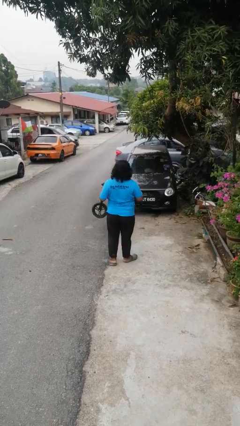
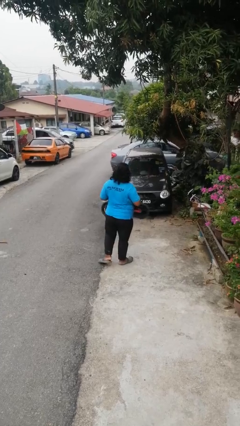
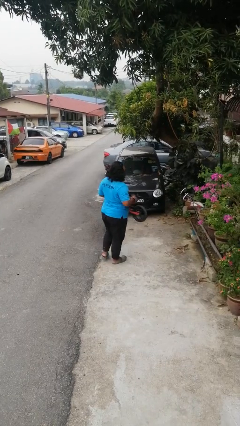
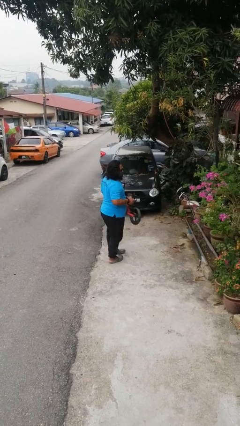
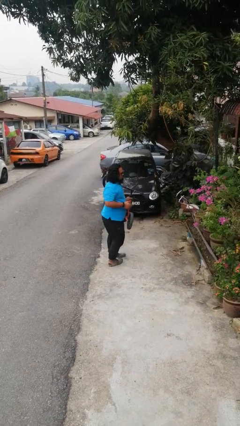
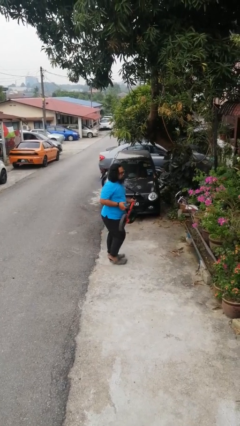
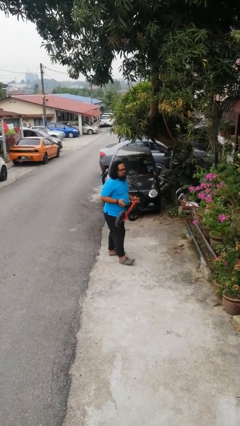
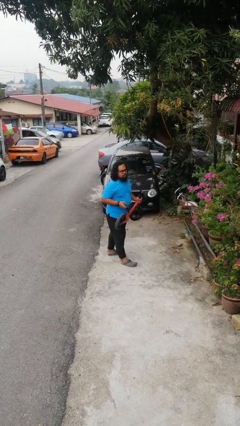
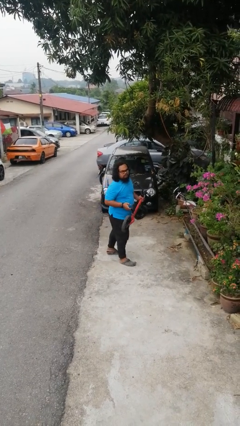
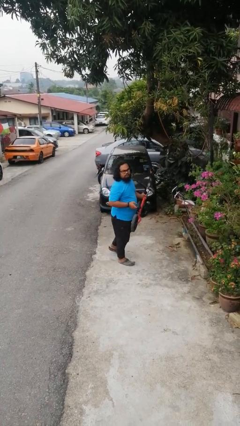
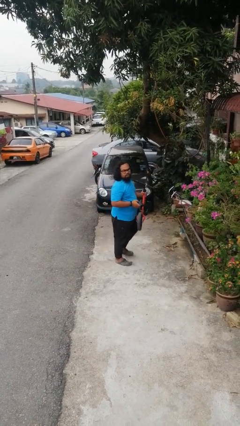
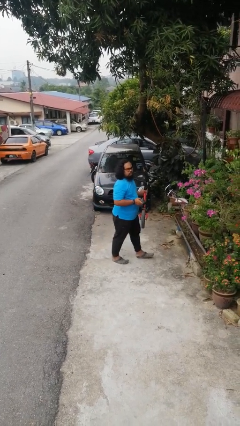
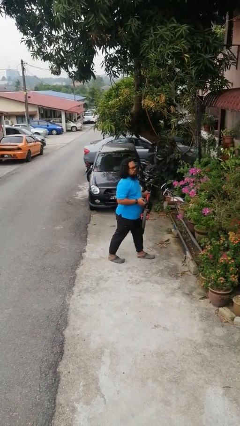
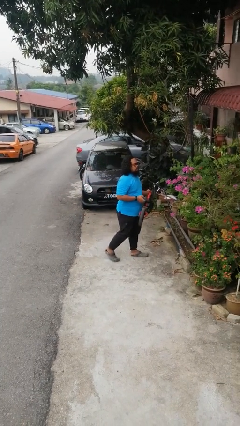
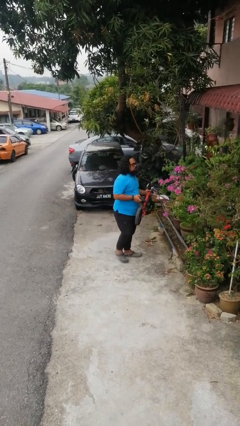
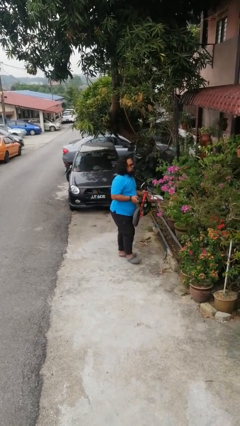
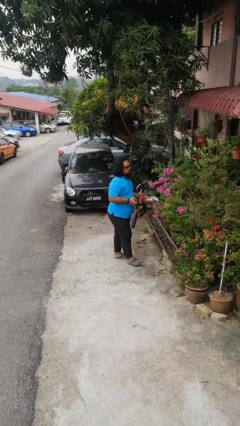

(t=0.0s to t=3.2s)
person carries bicycle

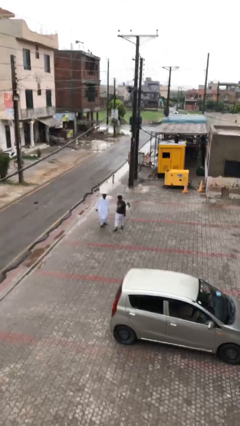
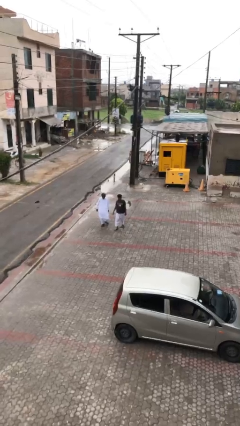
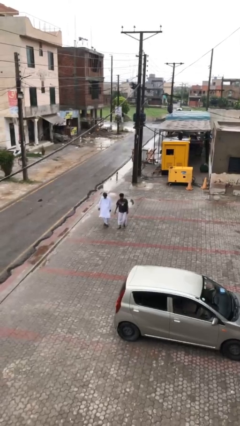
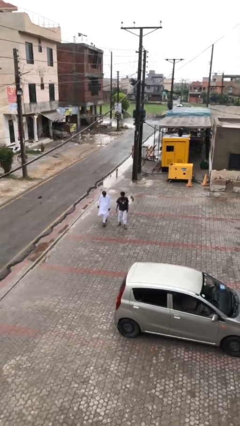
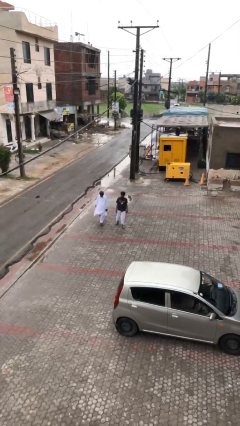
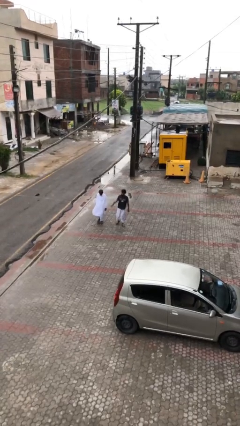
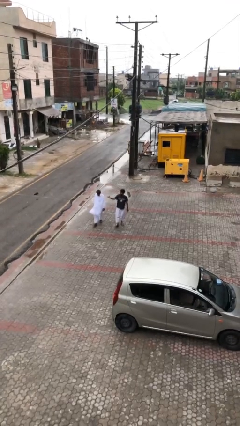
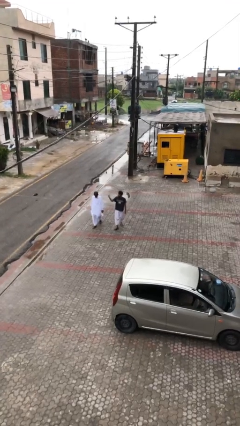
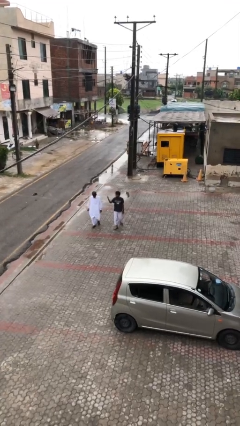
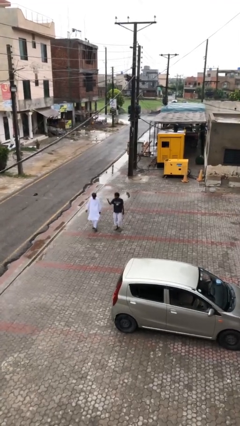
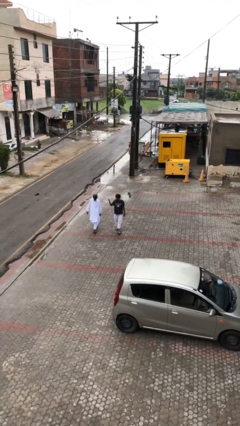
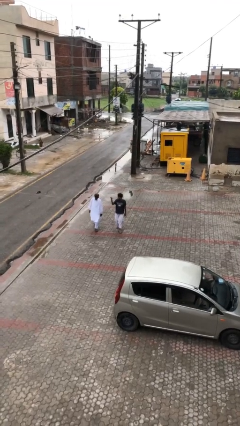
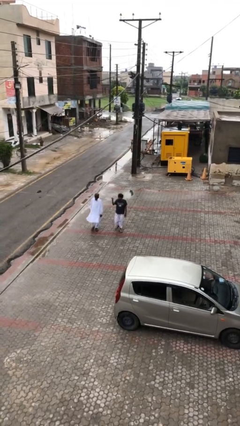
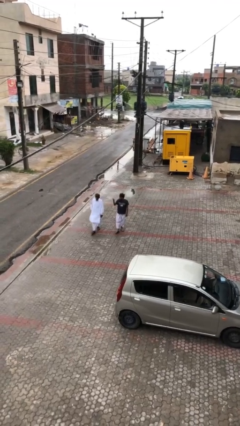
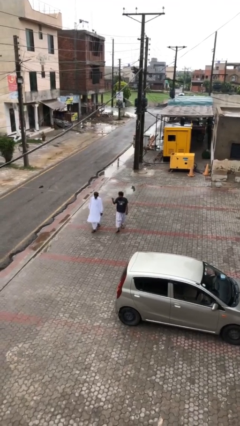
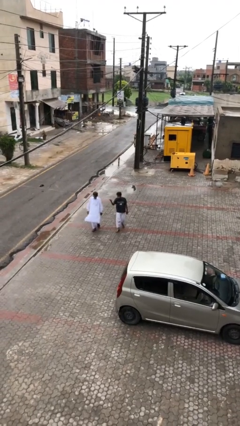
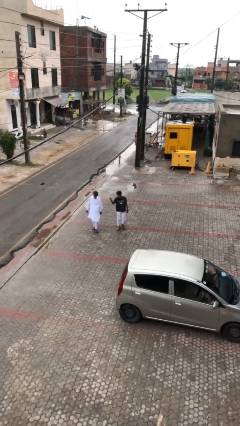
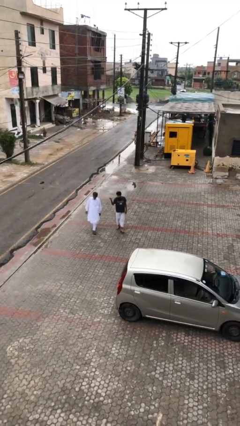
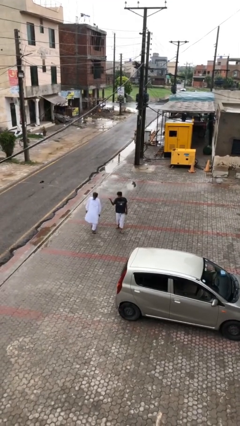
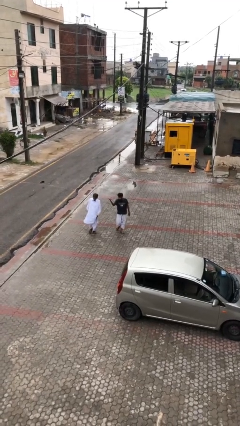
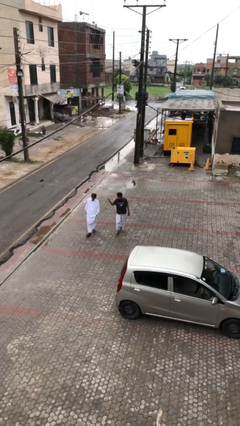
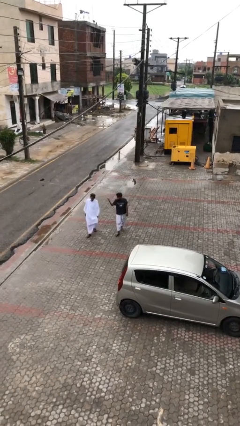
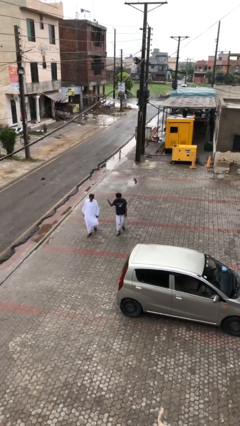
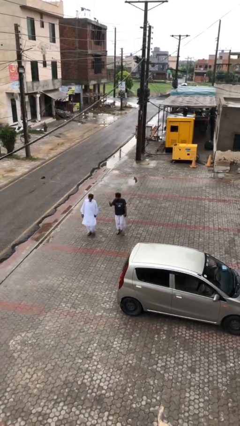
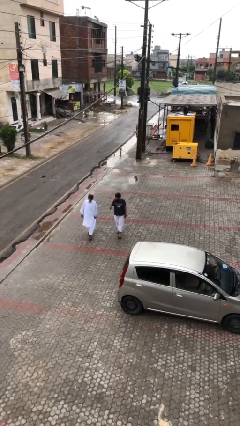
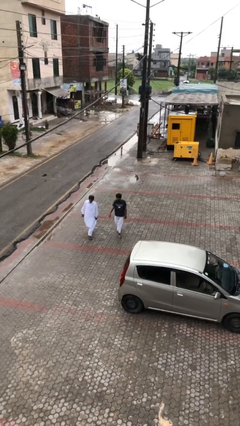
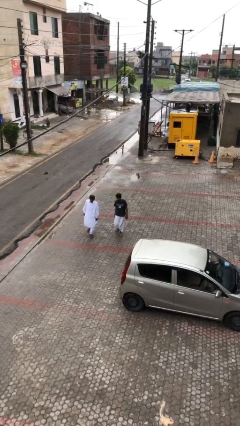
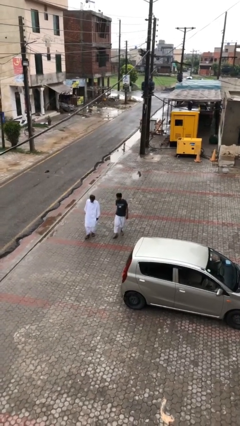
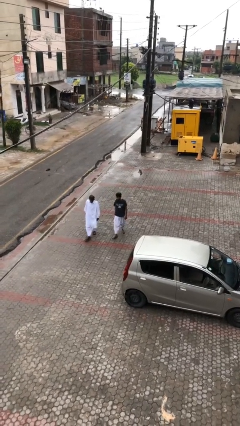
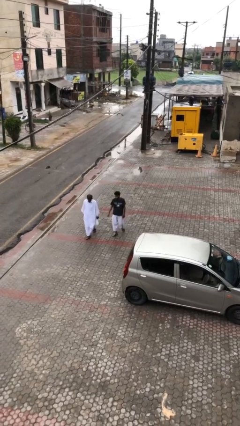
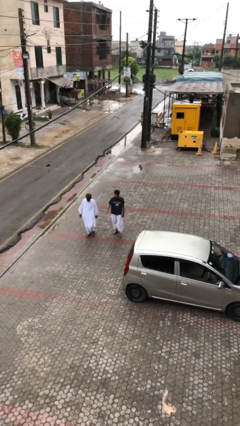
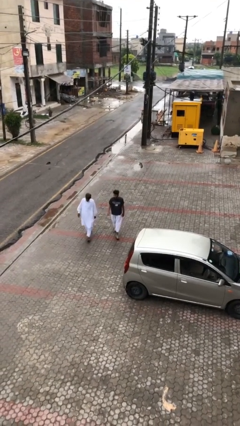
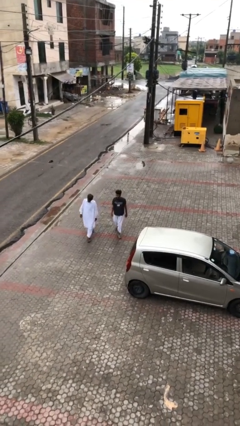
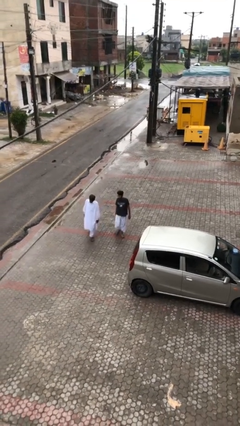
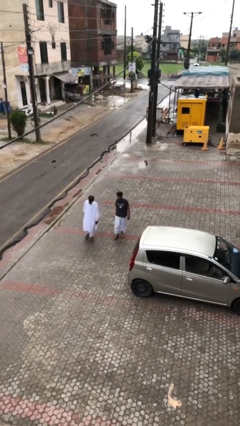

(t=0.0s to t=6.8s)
person talks to person

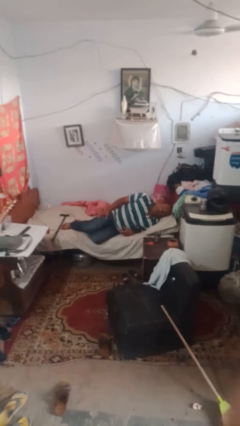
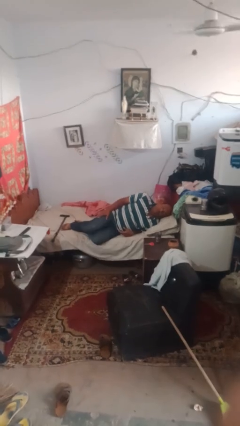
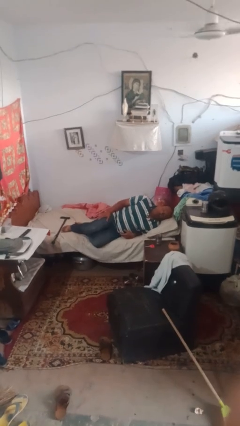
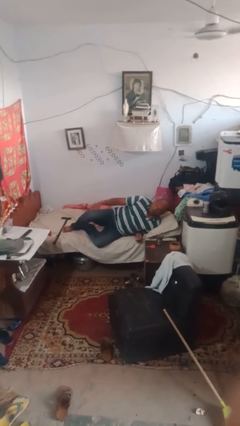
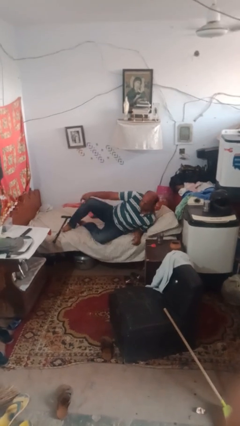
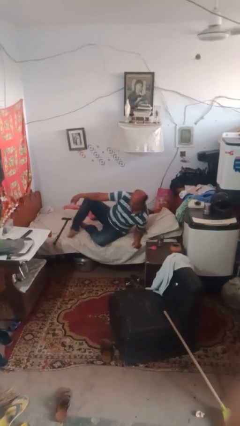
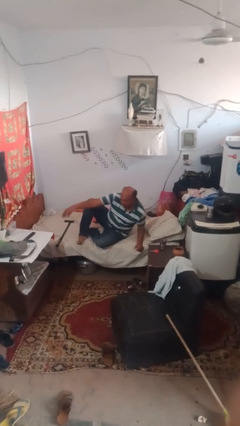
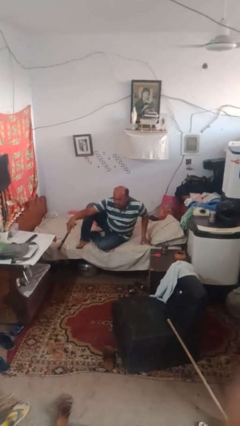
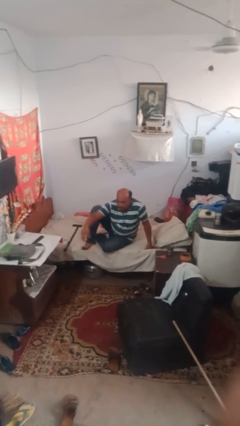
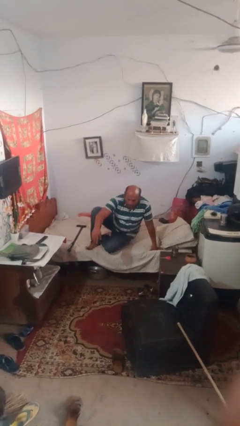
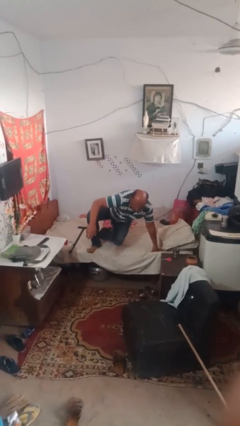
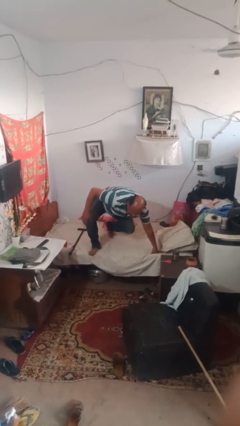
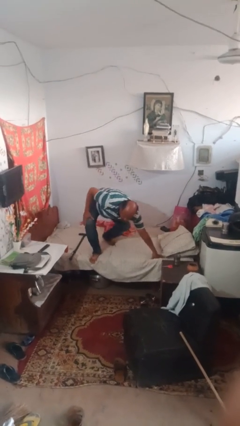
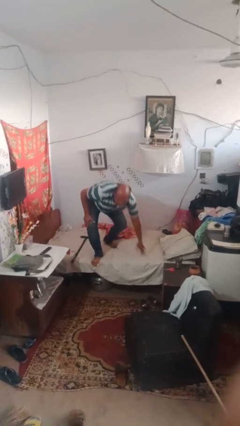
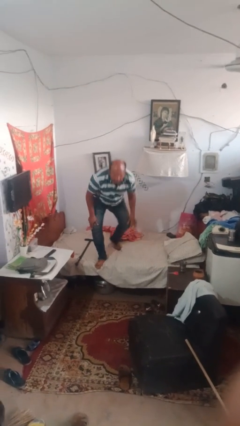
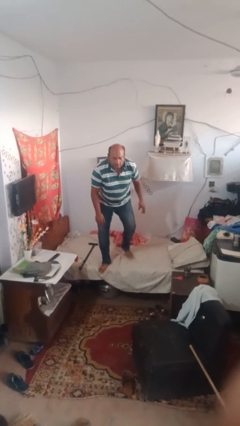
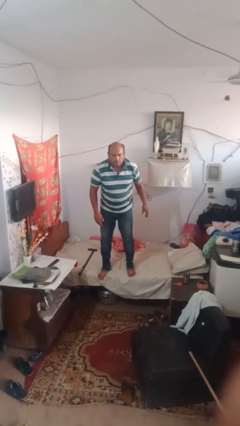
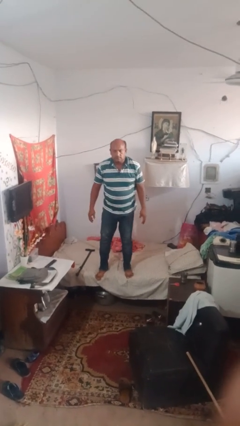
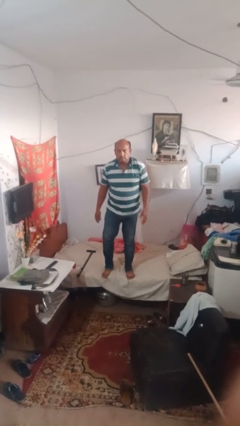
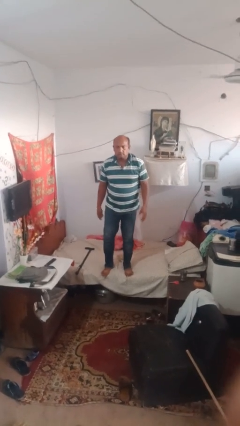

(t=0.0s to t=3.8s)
person stands up

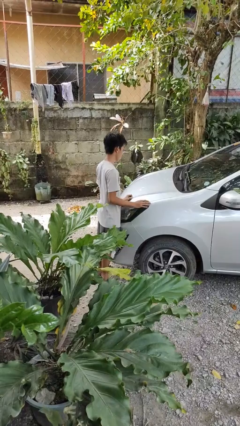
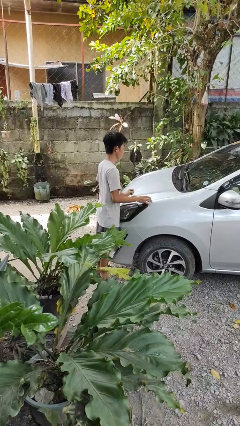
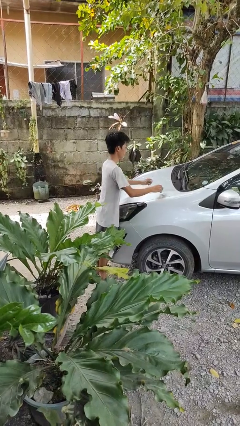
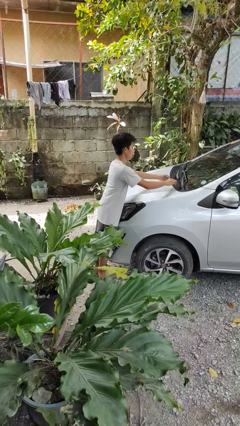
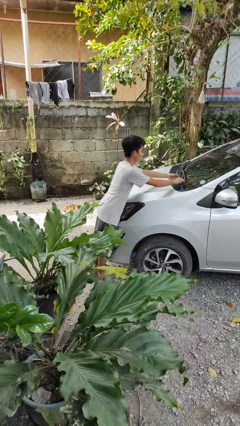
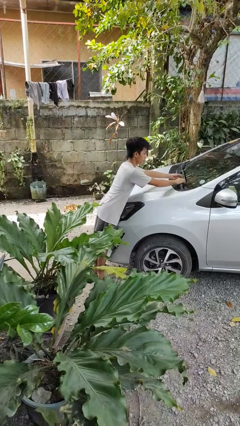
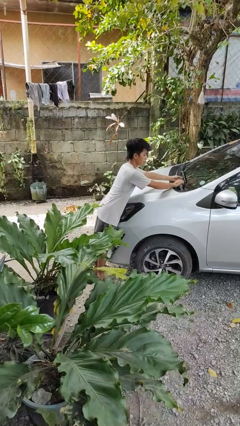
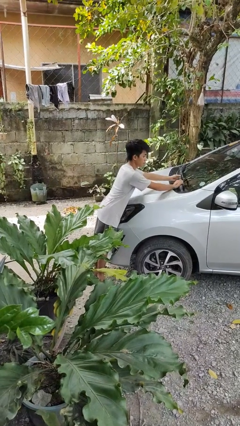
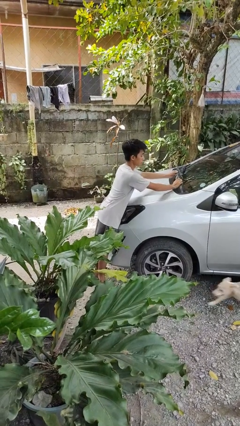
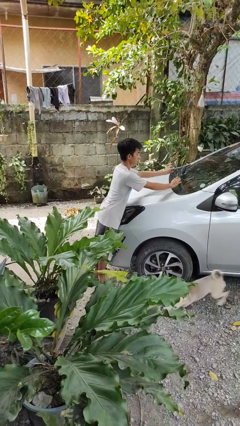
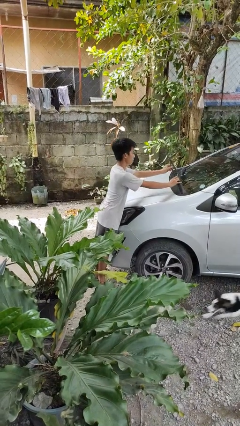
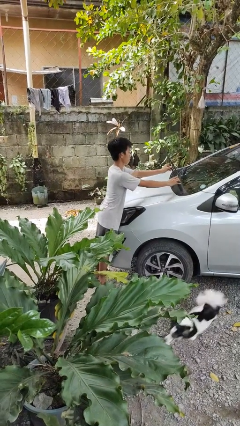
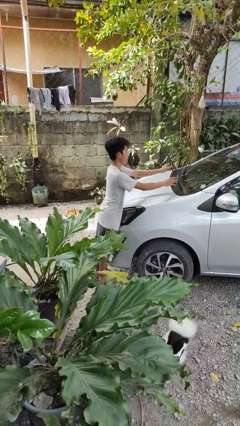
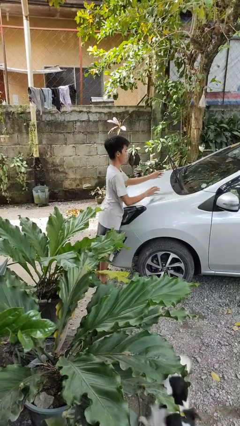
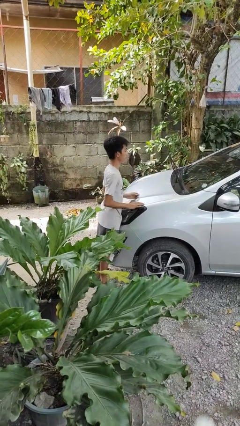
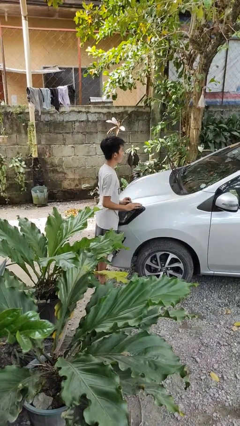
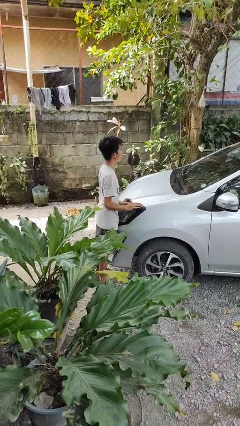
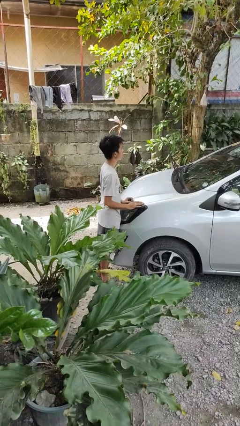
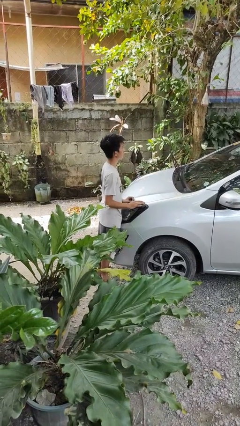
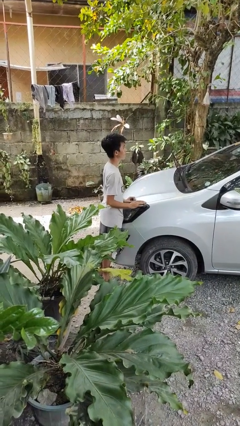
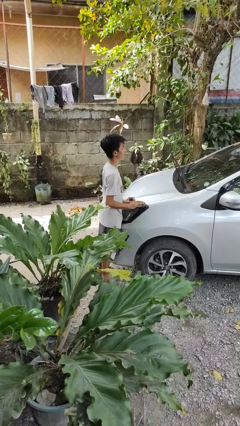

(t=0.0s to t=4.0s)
person flips up car wipers

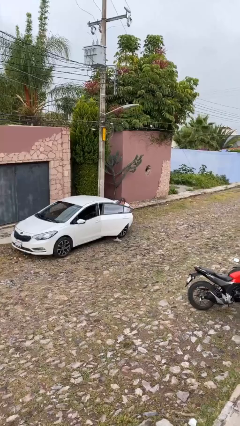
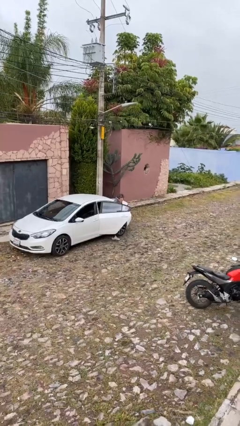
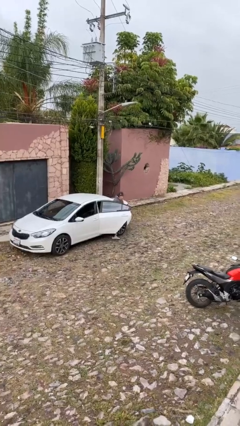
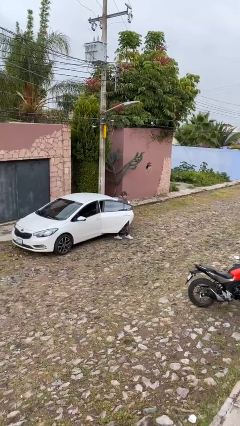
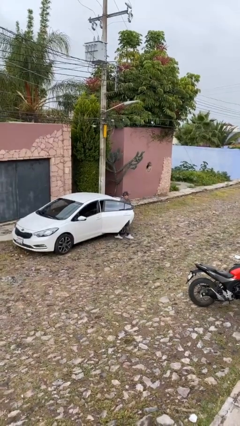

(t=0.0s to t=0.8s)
person exits car
